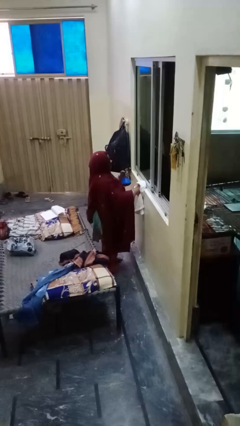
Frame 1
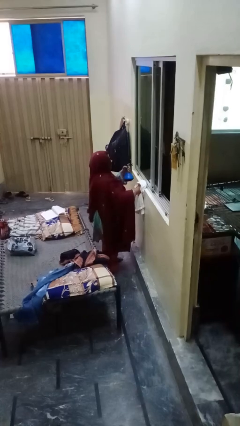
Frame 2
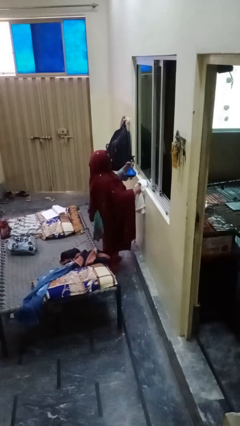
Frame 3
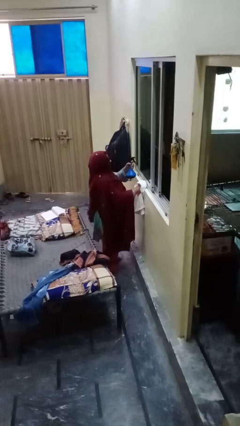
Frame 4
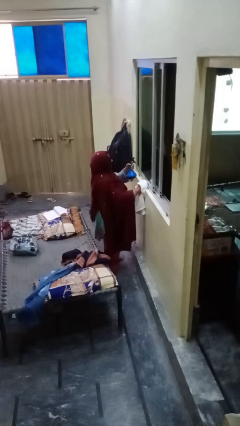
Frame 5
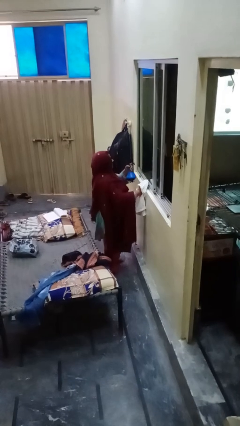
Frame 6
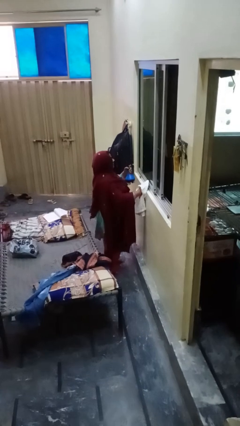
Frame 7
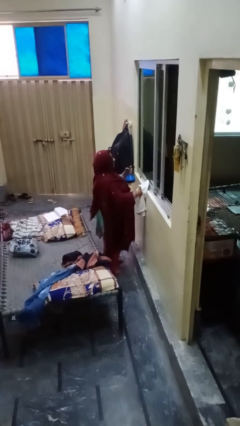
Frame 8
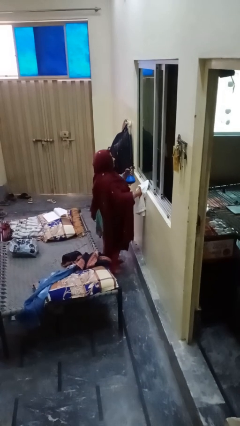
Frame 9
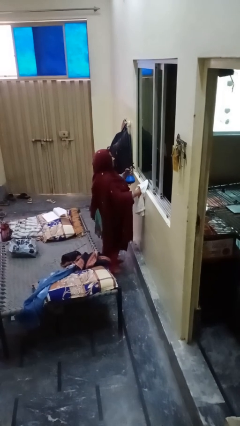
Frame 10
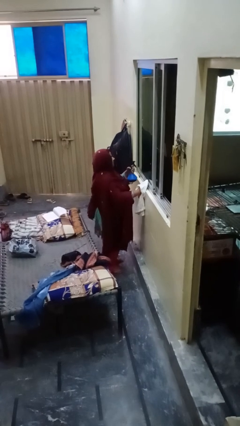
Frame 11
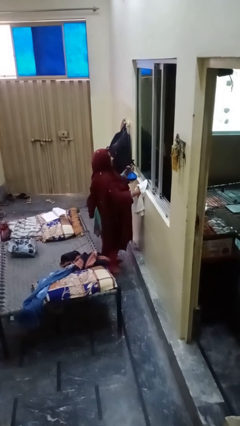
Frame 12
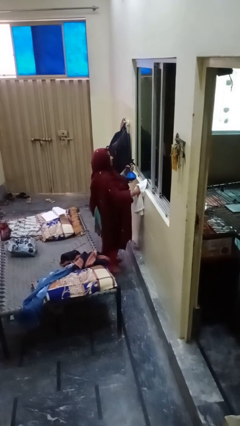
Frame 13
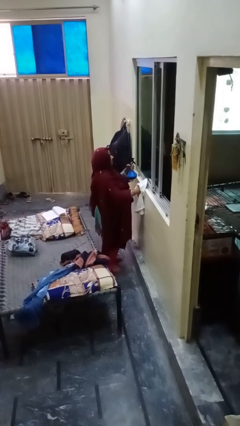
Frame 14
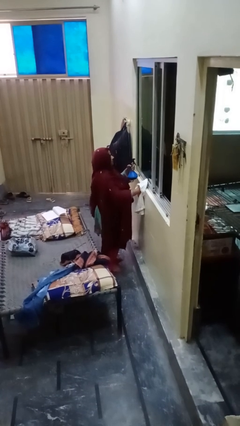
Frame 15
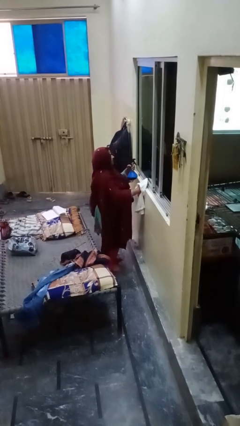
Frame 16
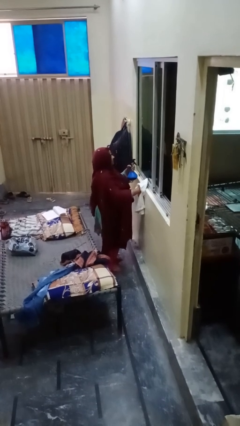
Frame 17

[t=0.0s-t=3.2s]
person sprays from bottle

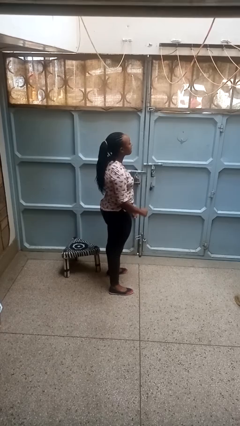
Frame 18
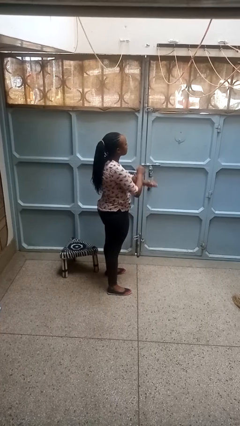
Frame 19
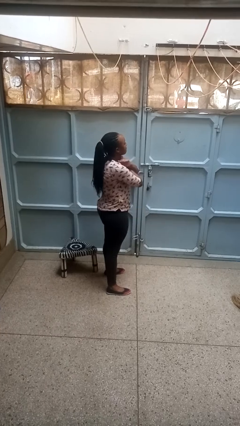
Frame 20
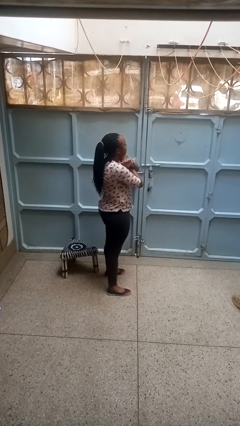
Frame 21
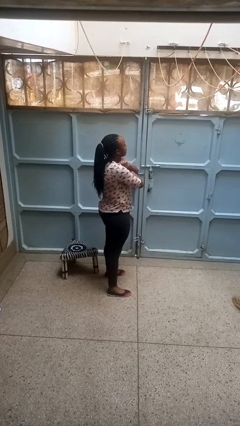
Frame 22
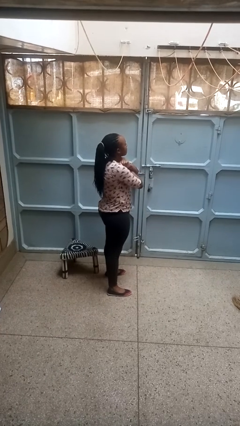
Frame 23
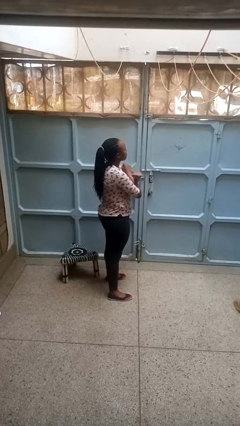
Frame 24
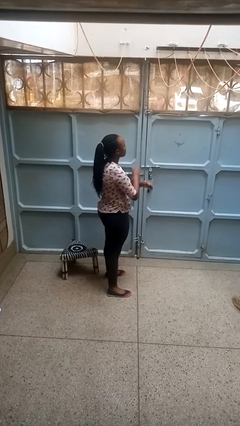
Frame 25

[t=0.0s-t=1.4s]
person gestures arms x

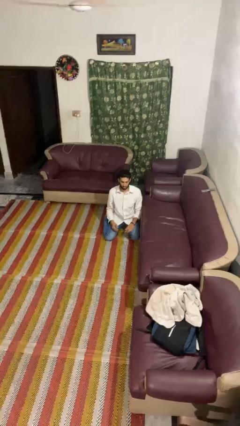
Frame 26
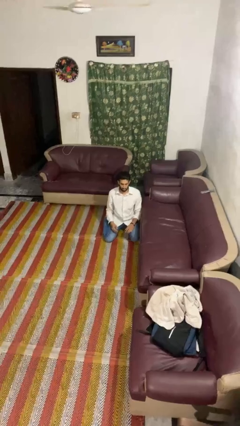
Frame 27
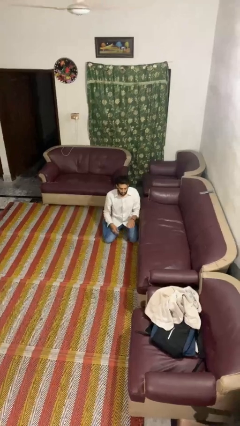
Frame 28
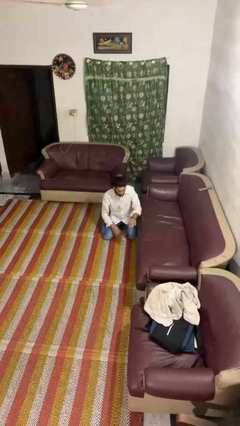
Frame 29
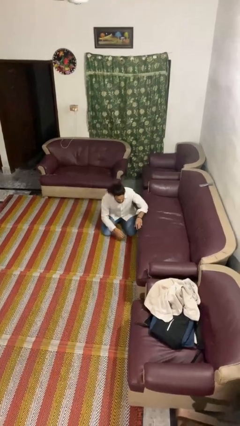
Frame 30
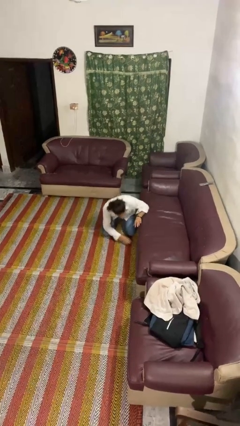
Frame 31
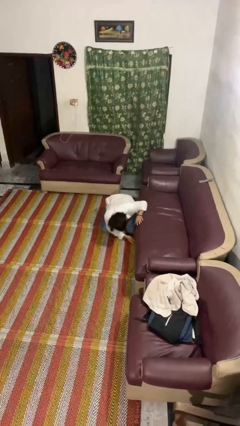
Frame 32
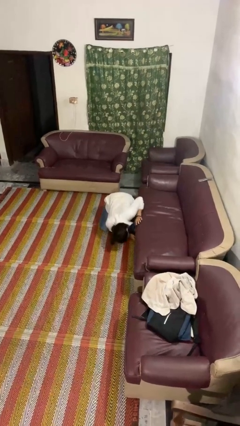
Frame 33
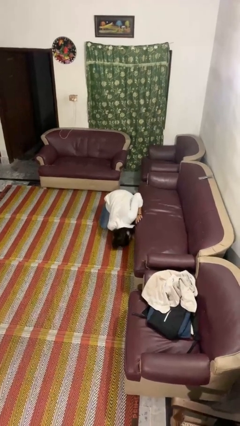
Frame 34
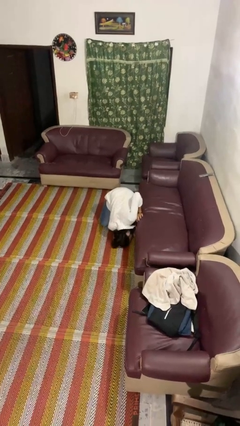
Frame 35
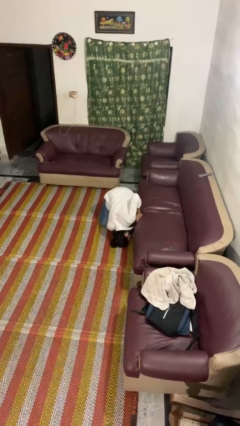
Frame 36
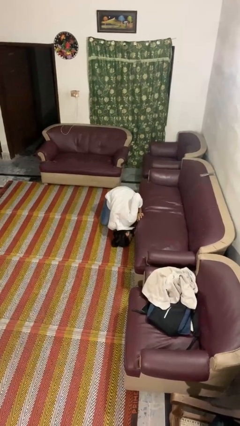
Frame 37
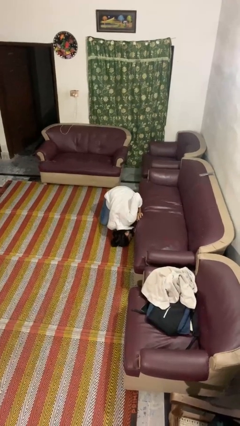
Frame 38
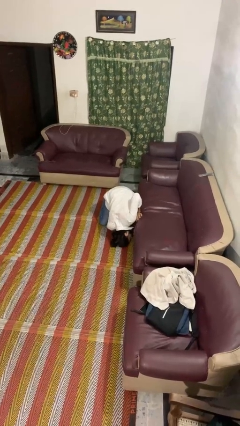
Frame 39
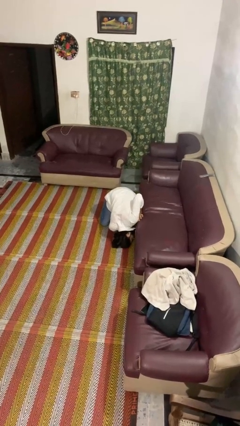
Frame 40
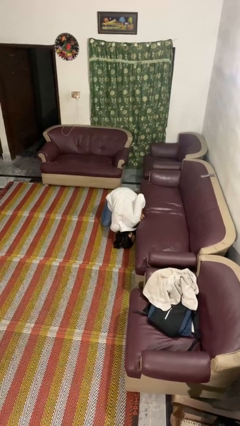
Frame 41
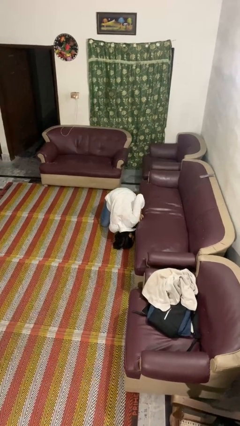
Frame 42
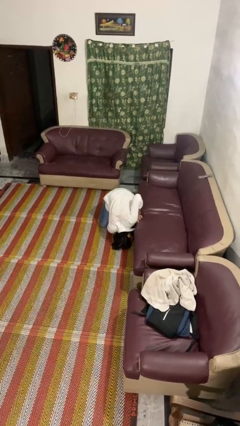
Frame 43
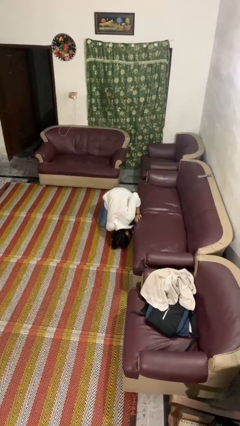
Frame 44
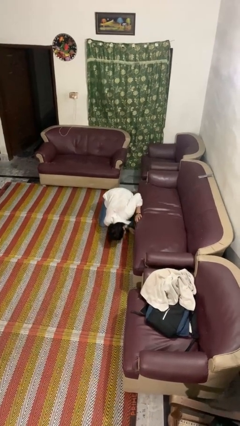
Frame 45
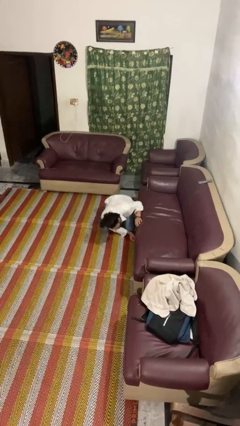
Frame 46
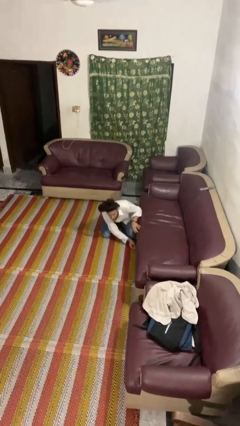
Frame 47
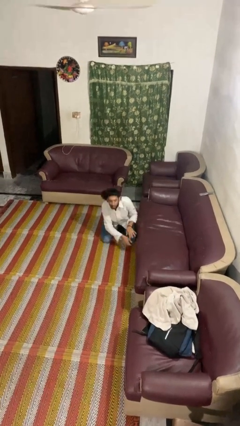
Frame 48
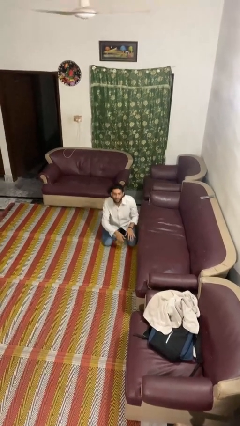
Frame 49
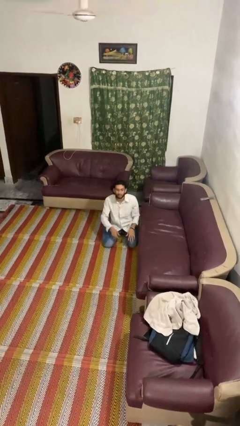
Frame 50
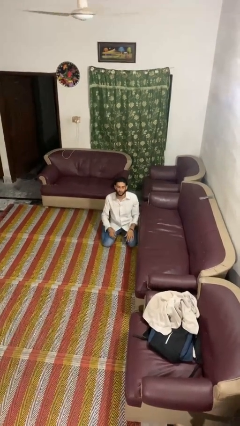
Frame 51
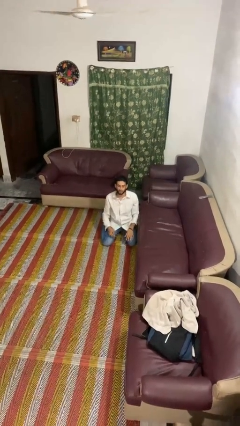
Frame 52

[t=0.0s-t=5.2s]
person searches under couch

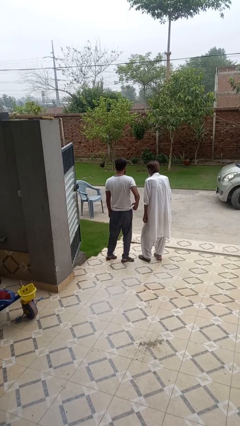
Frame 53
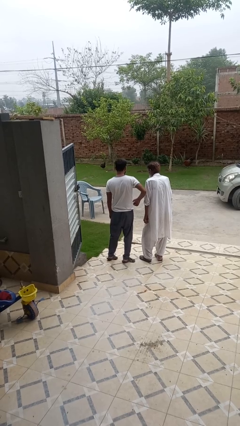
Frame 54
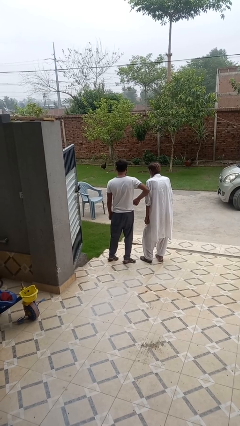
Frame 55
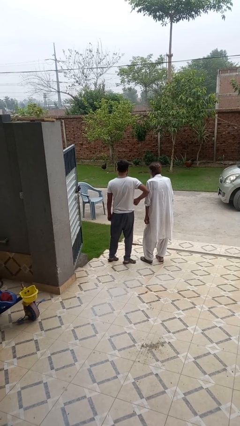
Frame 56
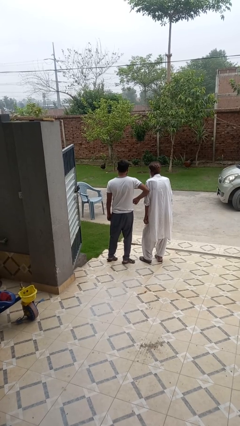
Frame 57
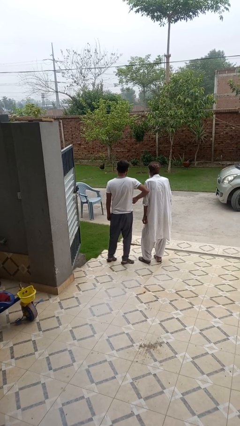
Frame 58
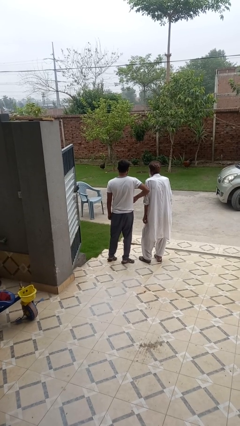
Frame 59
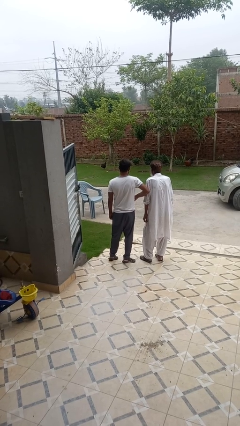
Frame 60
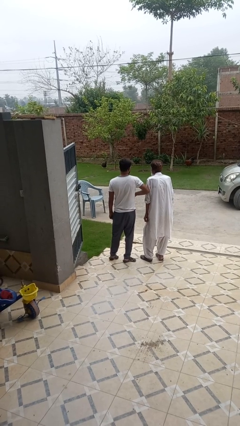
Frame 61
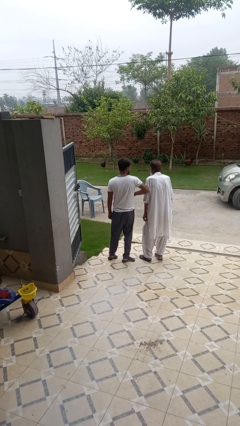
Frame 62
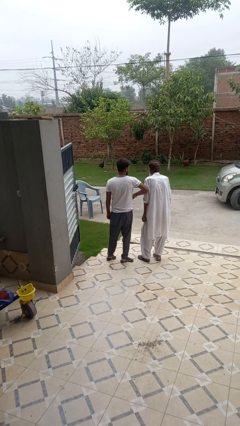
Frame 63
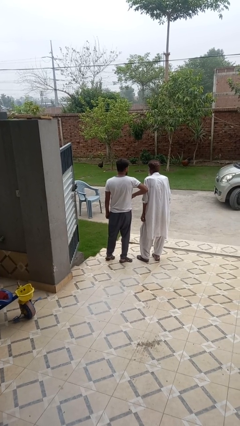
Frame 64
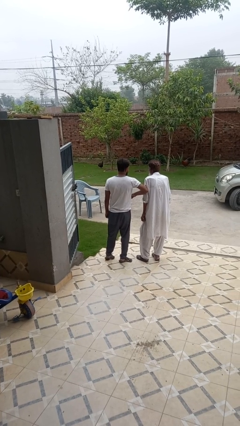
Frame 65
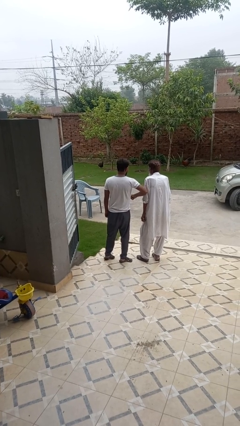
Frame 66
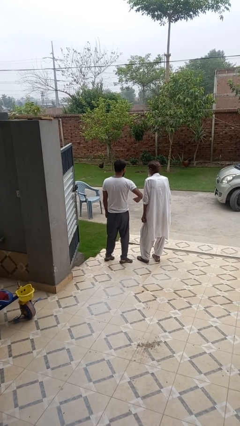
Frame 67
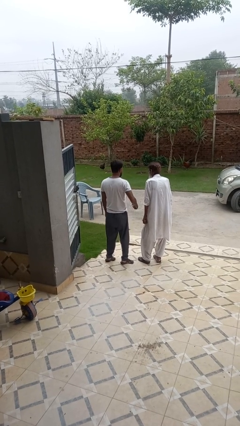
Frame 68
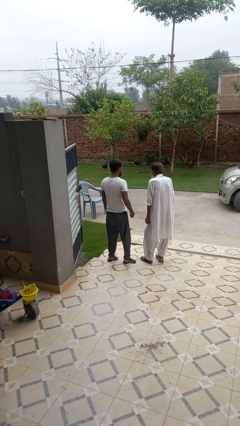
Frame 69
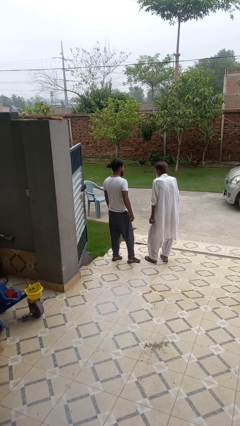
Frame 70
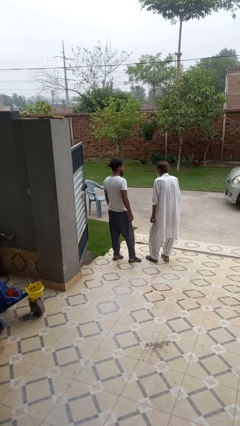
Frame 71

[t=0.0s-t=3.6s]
person nudges person with elbow

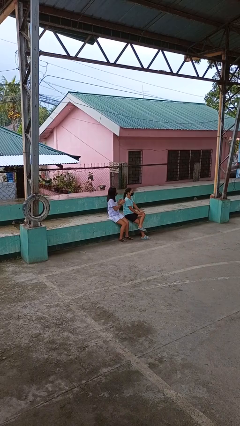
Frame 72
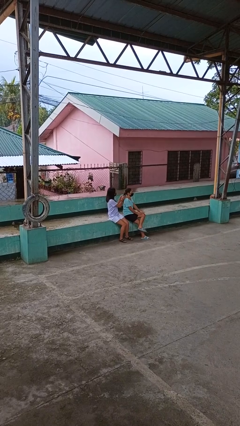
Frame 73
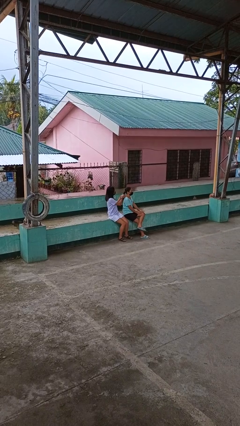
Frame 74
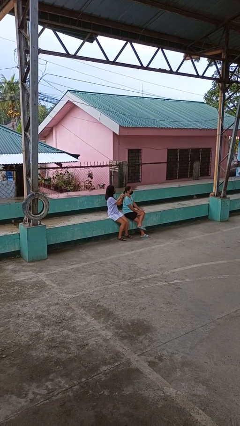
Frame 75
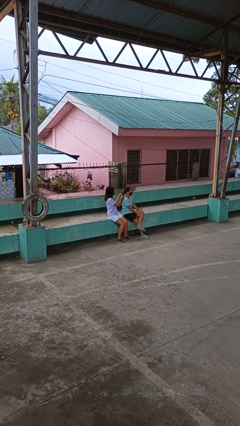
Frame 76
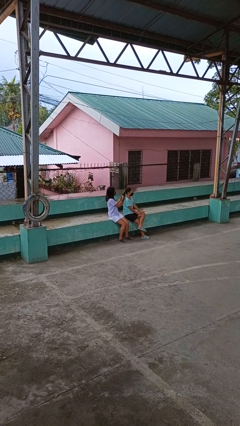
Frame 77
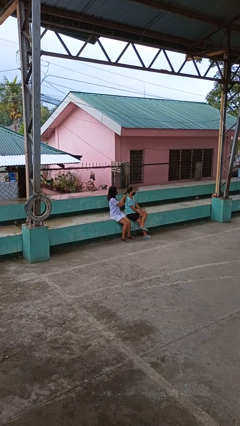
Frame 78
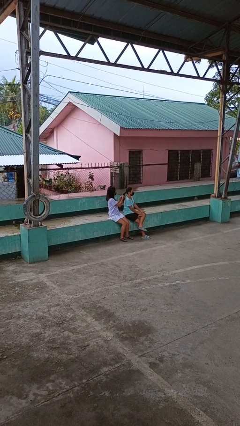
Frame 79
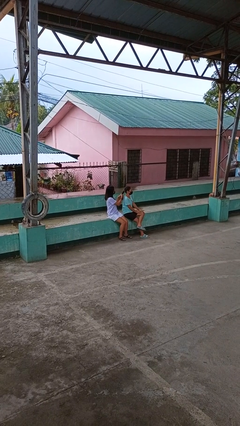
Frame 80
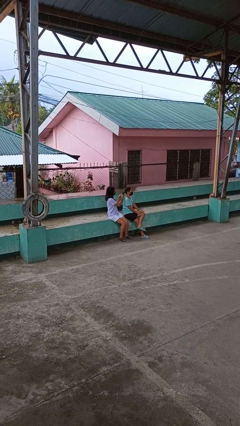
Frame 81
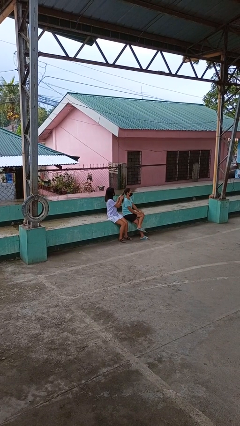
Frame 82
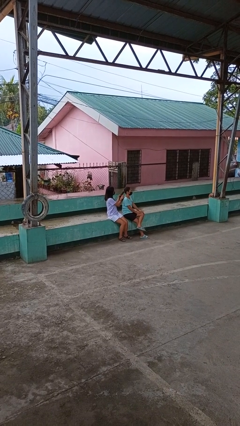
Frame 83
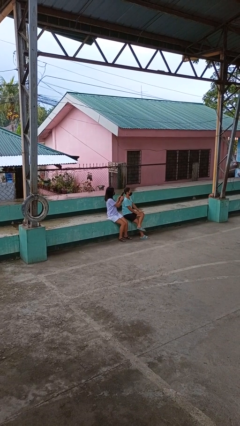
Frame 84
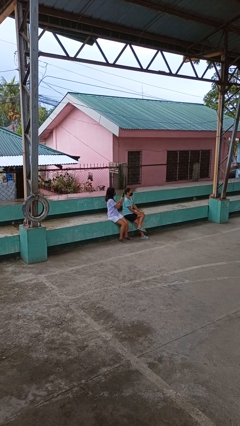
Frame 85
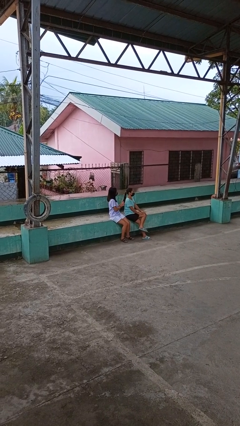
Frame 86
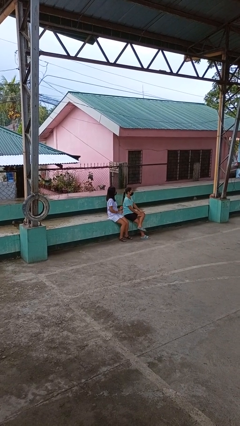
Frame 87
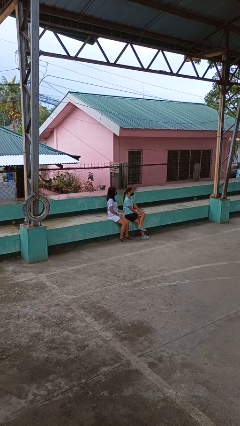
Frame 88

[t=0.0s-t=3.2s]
person braids hair of person

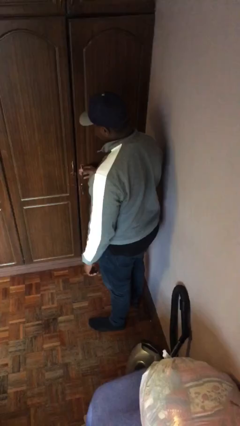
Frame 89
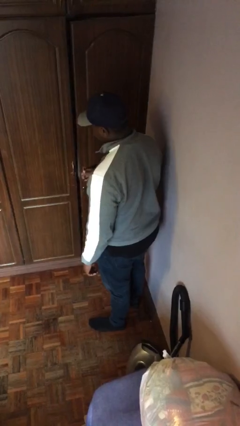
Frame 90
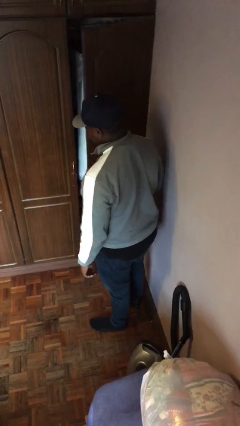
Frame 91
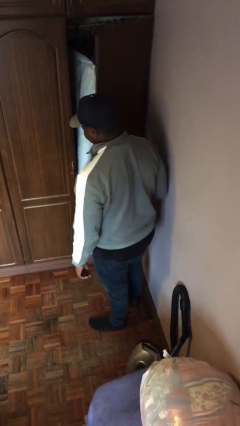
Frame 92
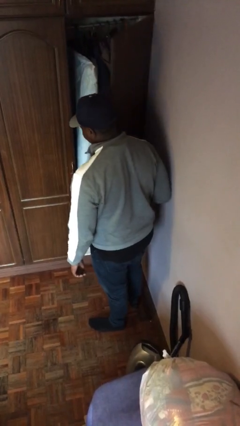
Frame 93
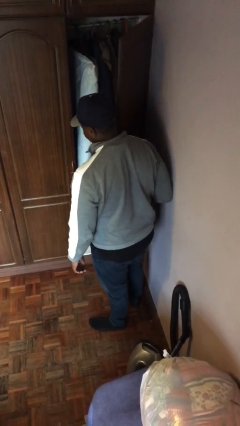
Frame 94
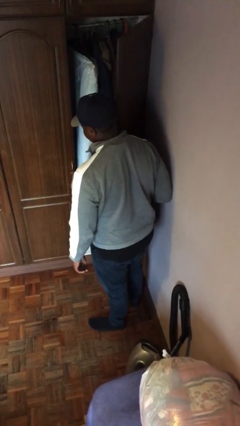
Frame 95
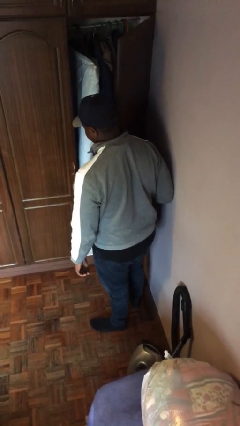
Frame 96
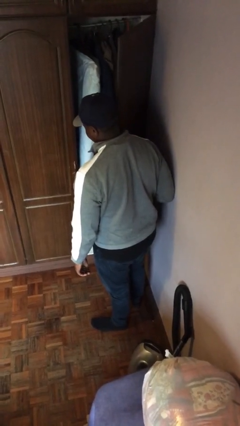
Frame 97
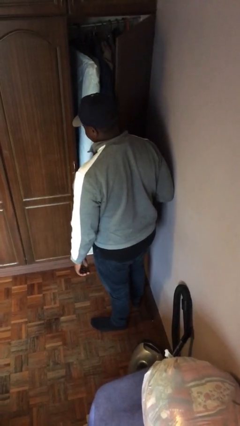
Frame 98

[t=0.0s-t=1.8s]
person opens closet door
